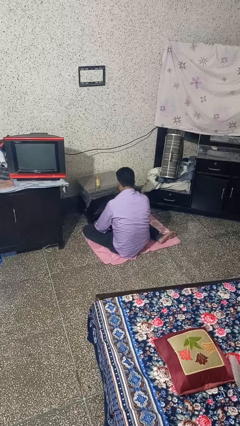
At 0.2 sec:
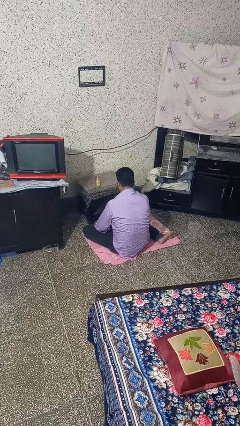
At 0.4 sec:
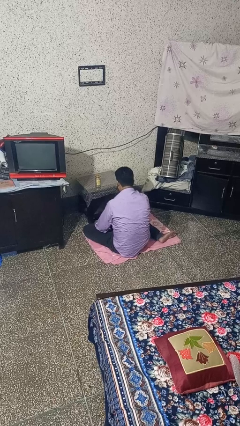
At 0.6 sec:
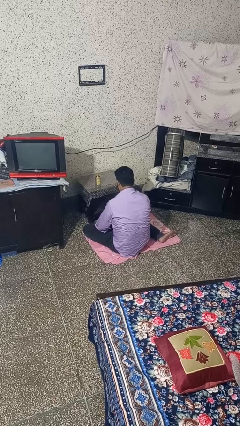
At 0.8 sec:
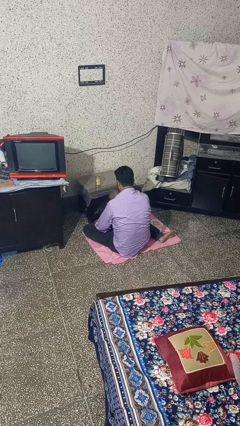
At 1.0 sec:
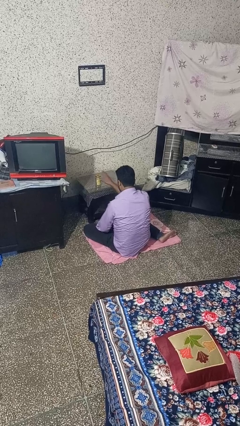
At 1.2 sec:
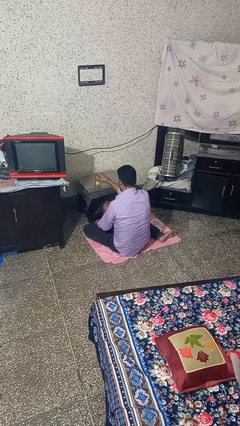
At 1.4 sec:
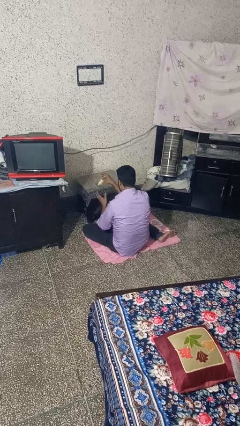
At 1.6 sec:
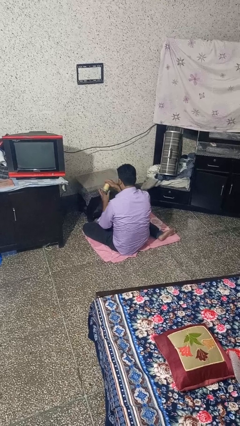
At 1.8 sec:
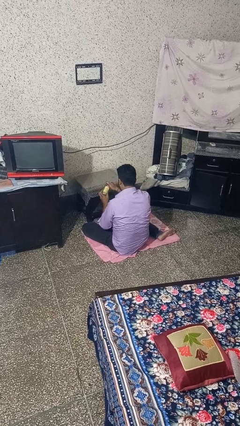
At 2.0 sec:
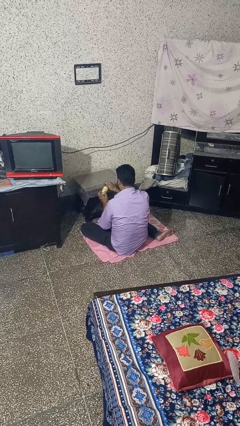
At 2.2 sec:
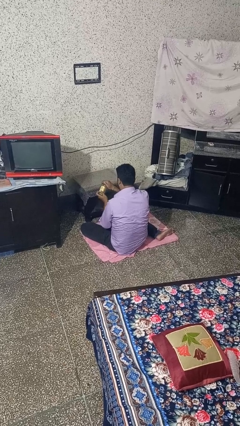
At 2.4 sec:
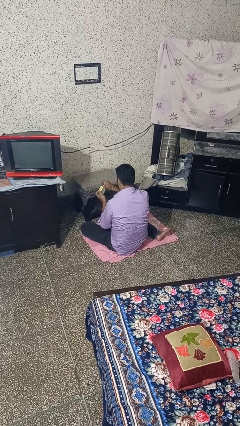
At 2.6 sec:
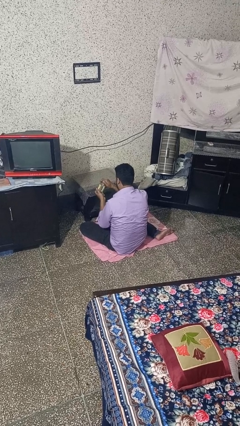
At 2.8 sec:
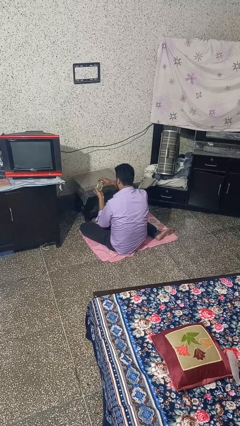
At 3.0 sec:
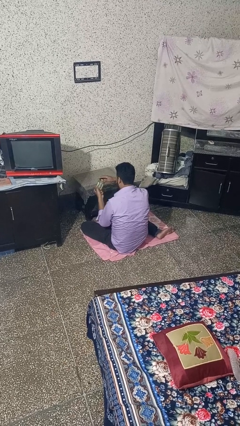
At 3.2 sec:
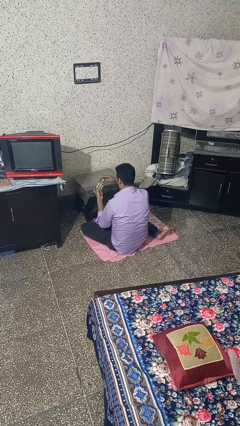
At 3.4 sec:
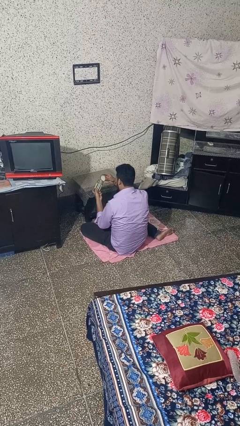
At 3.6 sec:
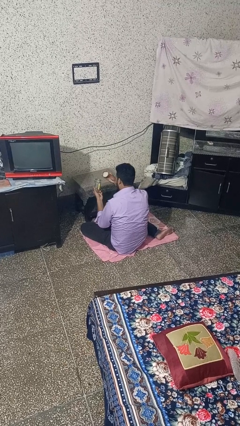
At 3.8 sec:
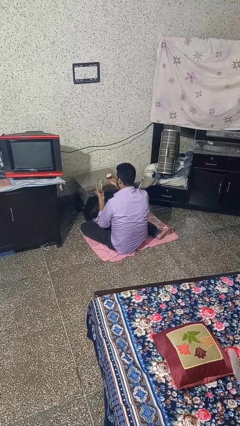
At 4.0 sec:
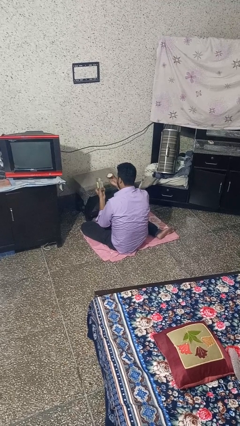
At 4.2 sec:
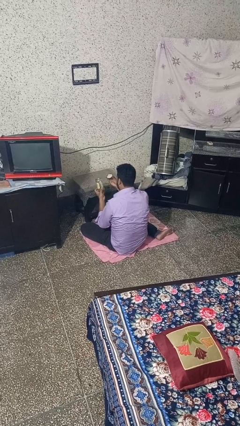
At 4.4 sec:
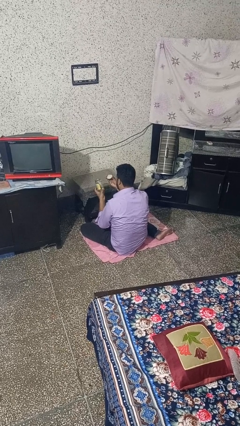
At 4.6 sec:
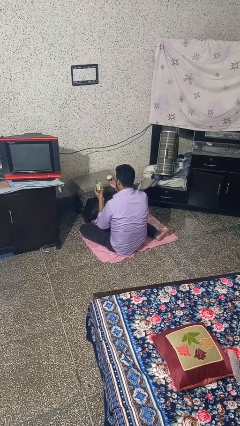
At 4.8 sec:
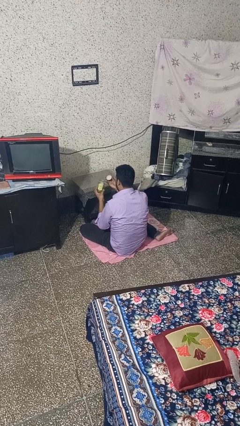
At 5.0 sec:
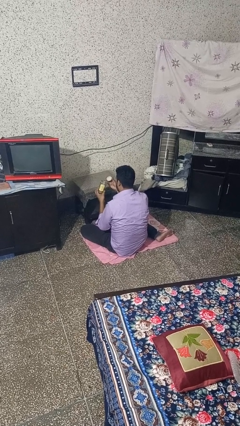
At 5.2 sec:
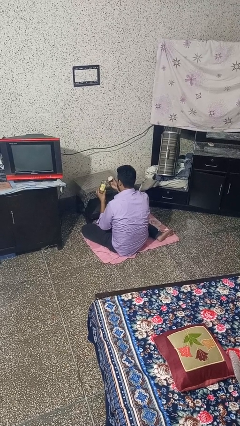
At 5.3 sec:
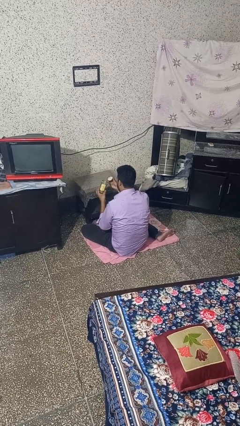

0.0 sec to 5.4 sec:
person opens jar

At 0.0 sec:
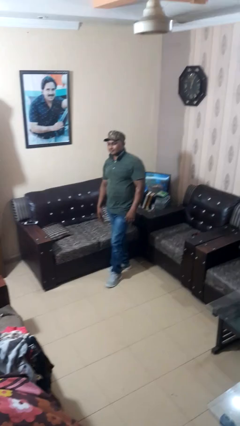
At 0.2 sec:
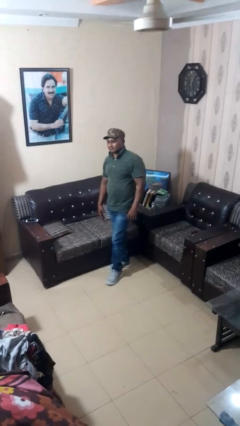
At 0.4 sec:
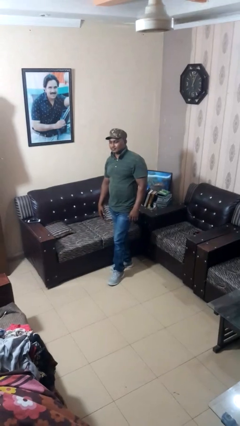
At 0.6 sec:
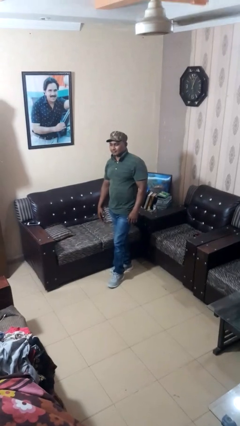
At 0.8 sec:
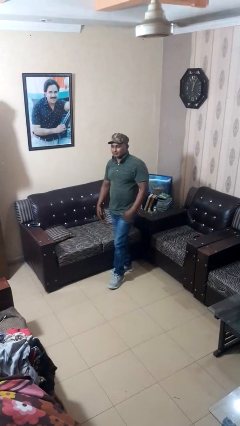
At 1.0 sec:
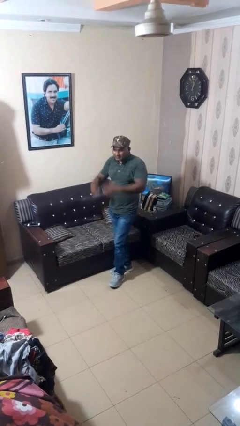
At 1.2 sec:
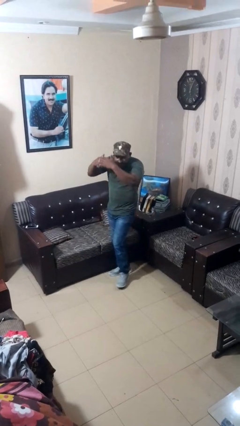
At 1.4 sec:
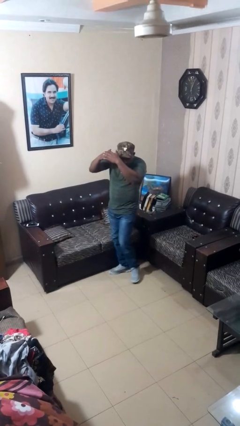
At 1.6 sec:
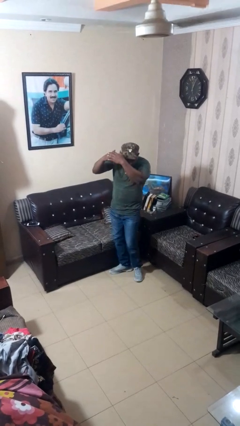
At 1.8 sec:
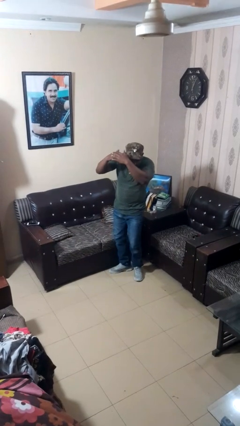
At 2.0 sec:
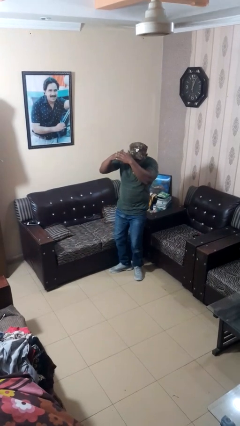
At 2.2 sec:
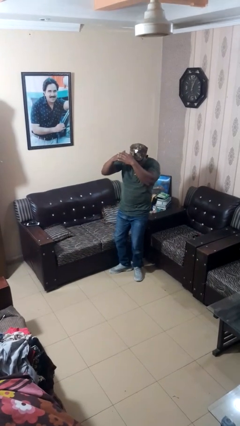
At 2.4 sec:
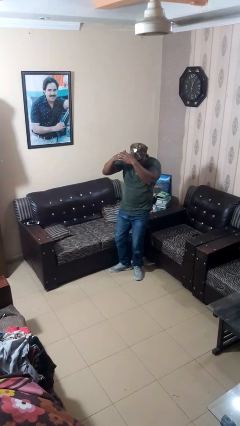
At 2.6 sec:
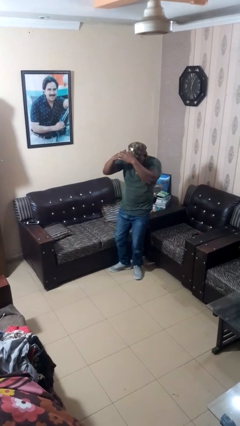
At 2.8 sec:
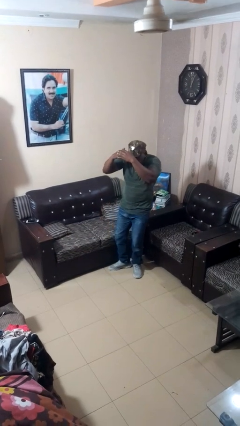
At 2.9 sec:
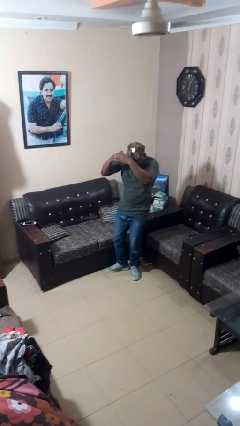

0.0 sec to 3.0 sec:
person shades eyes

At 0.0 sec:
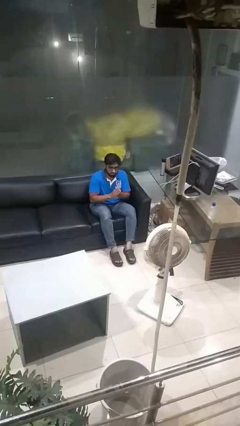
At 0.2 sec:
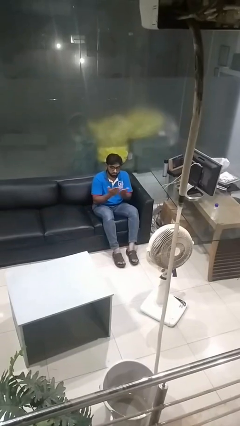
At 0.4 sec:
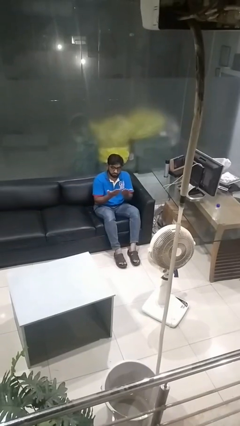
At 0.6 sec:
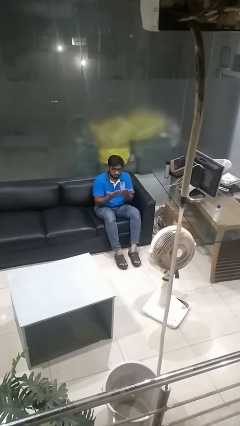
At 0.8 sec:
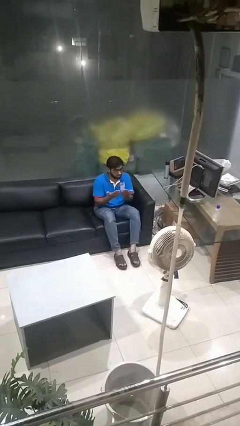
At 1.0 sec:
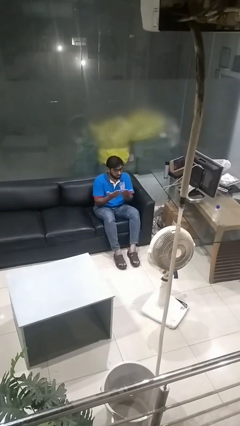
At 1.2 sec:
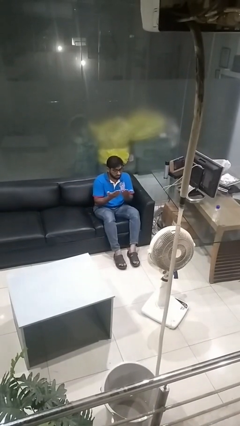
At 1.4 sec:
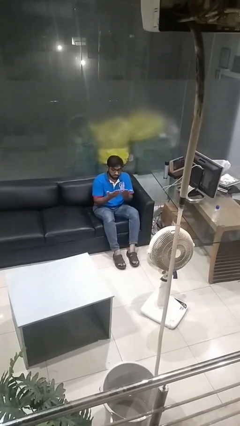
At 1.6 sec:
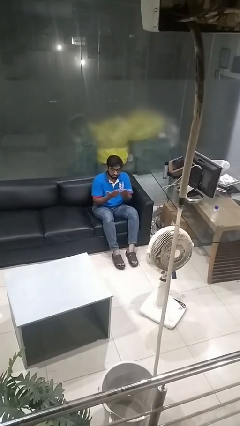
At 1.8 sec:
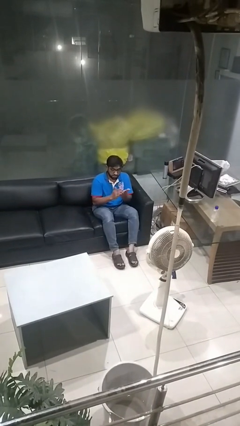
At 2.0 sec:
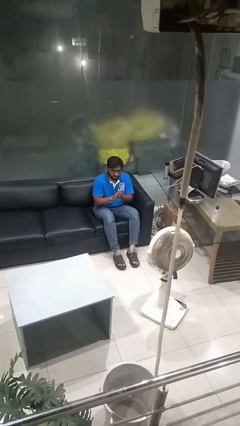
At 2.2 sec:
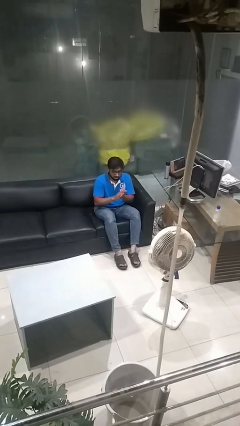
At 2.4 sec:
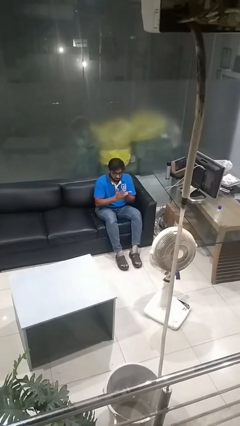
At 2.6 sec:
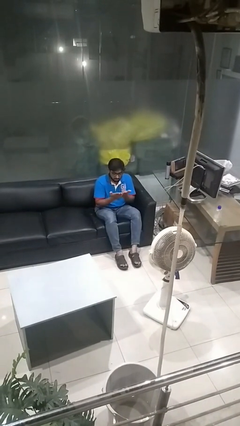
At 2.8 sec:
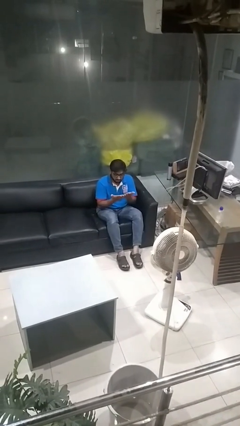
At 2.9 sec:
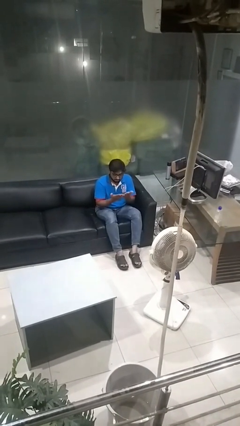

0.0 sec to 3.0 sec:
person looks at hands in lap

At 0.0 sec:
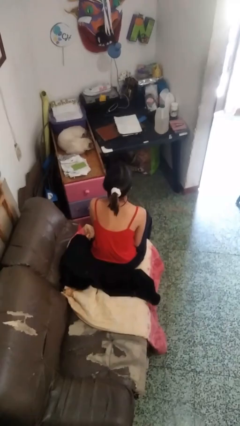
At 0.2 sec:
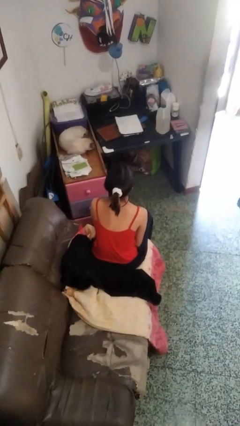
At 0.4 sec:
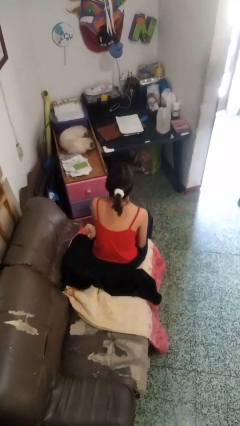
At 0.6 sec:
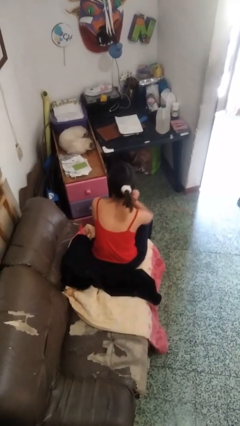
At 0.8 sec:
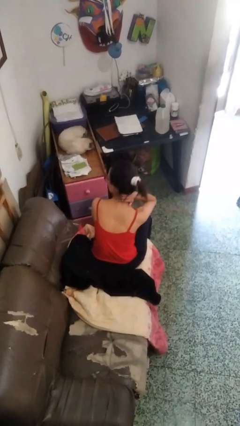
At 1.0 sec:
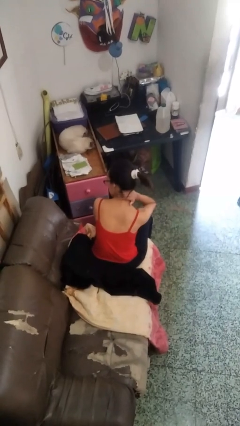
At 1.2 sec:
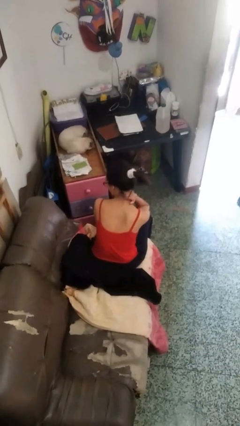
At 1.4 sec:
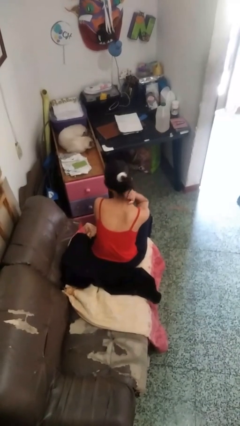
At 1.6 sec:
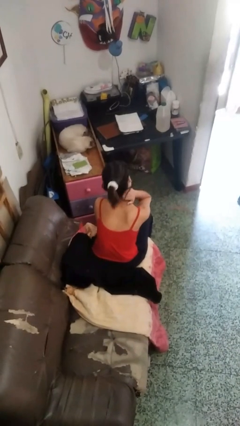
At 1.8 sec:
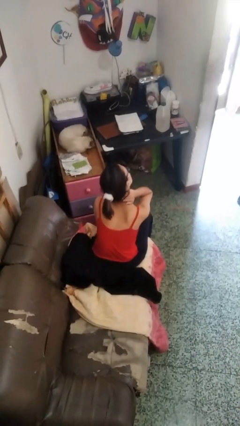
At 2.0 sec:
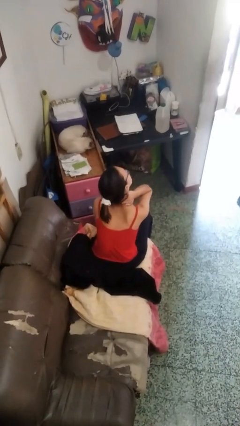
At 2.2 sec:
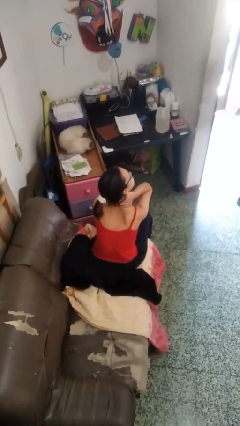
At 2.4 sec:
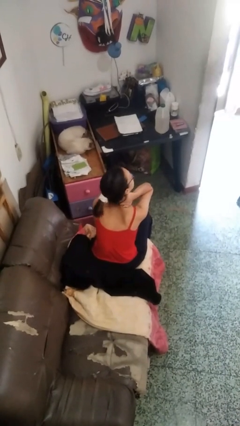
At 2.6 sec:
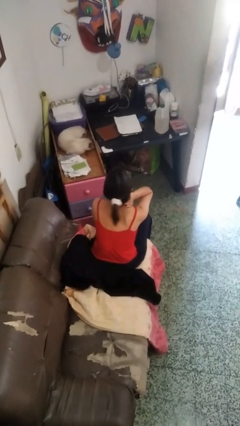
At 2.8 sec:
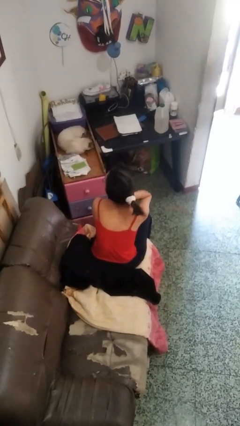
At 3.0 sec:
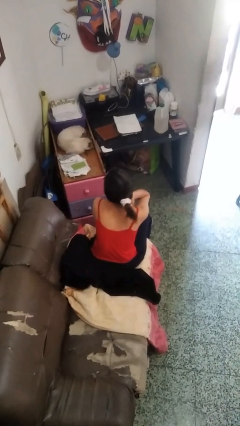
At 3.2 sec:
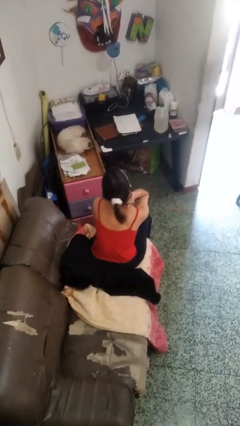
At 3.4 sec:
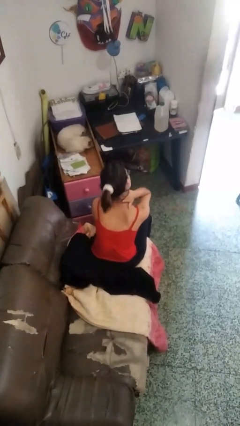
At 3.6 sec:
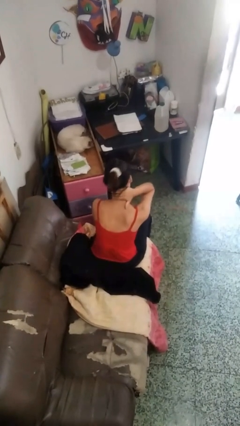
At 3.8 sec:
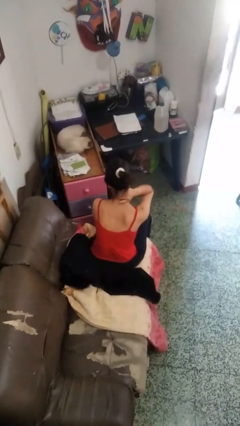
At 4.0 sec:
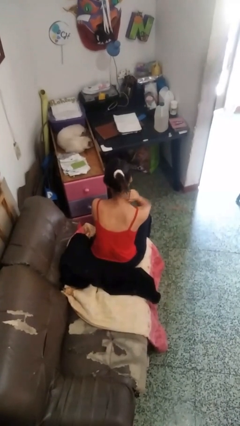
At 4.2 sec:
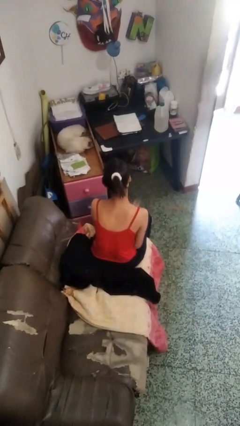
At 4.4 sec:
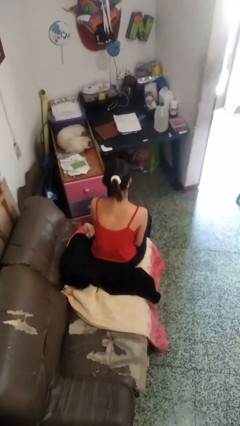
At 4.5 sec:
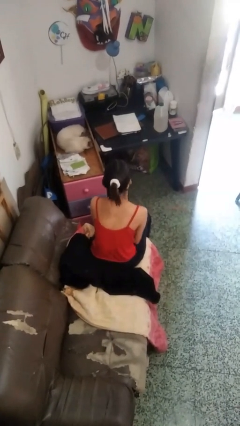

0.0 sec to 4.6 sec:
person rubs neck

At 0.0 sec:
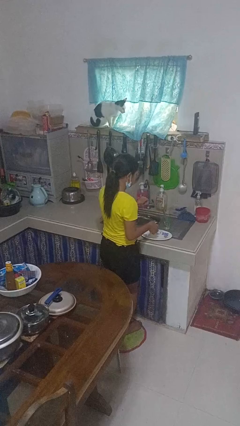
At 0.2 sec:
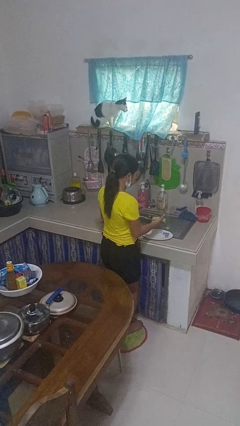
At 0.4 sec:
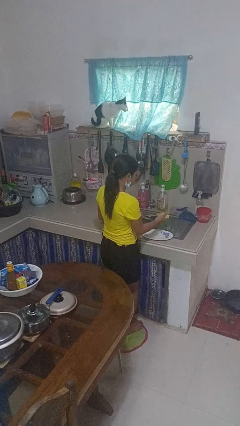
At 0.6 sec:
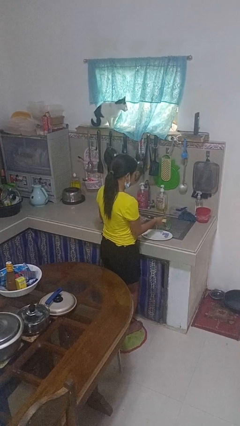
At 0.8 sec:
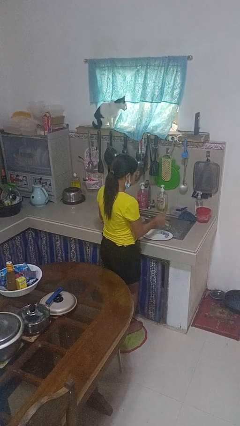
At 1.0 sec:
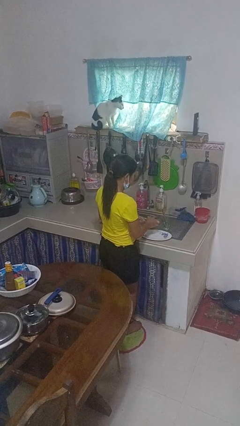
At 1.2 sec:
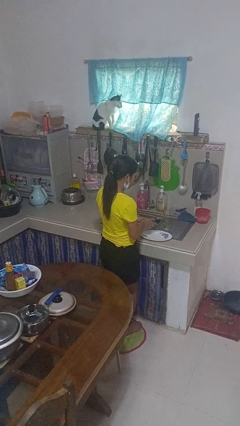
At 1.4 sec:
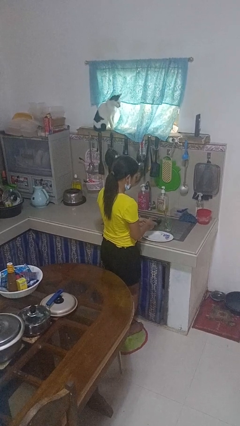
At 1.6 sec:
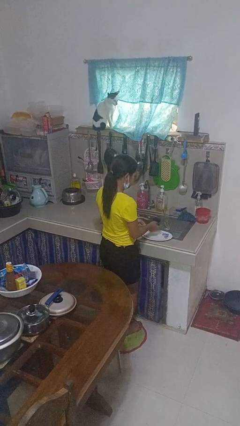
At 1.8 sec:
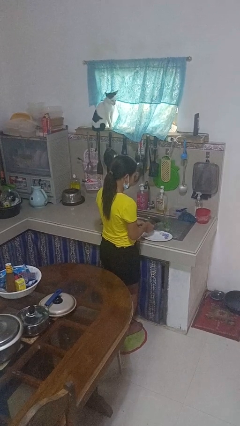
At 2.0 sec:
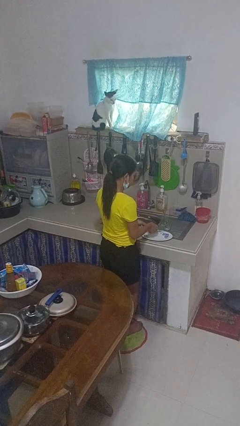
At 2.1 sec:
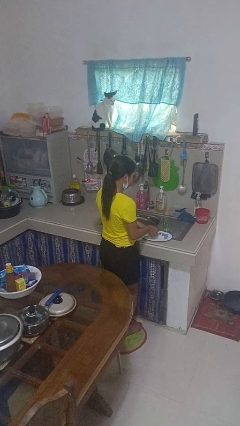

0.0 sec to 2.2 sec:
person washes dish
